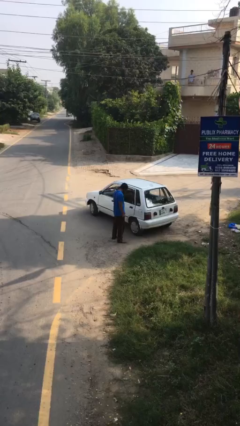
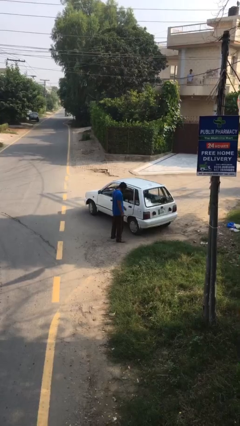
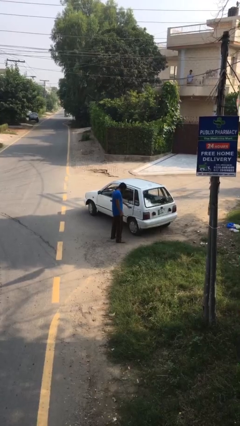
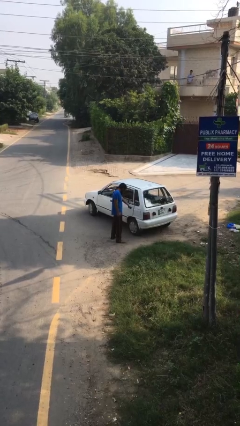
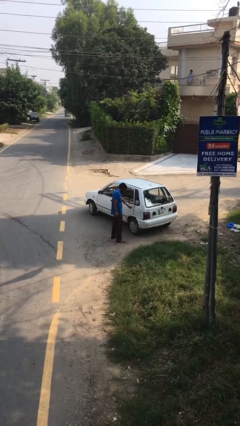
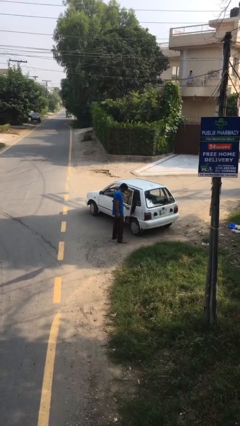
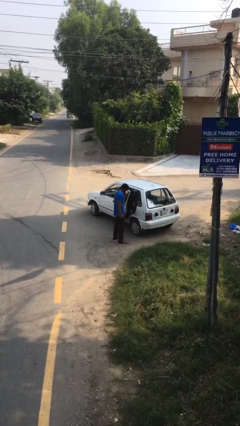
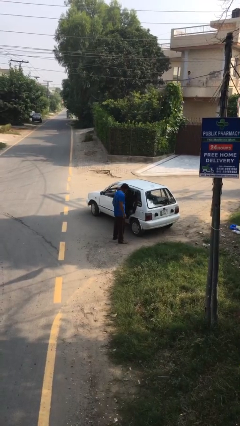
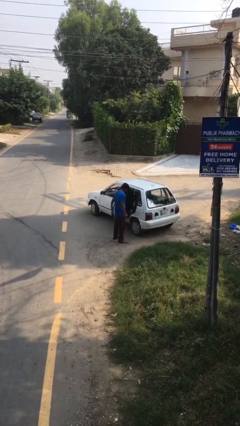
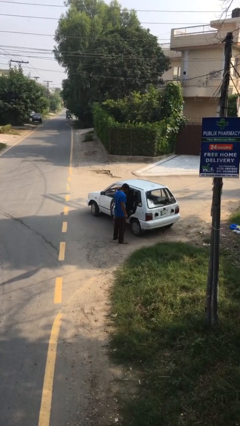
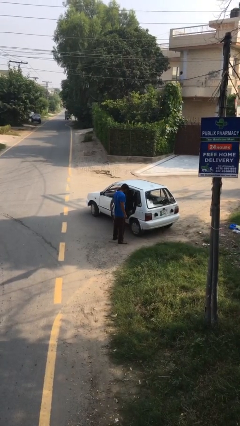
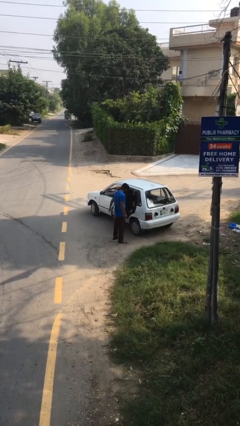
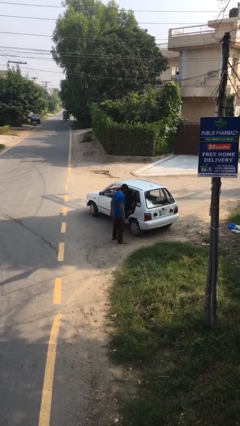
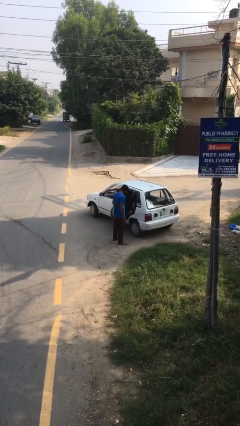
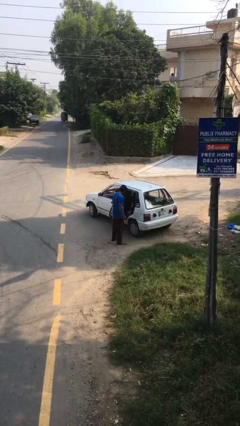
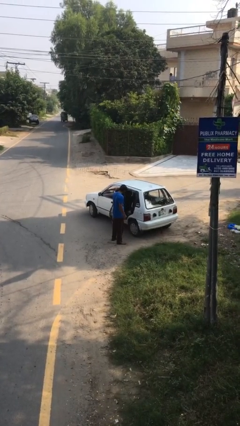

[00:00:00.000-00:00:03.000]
person opens car door

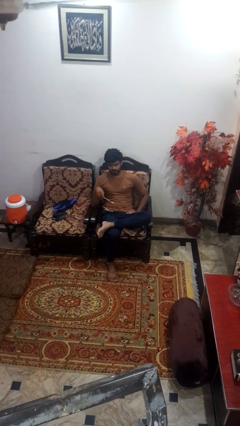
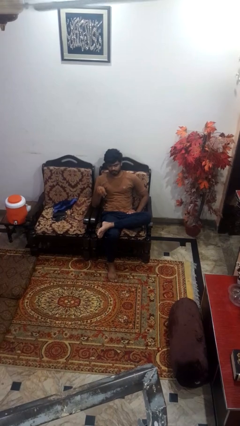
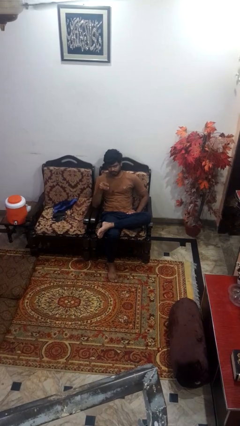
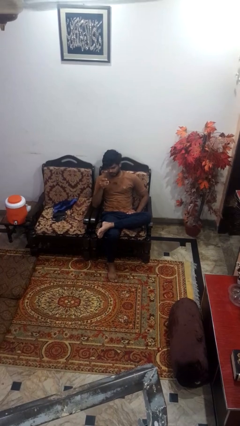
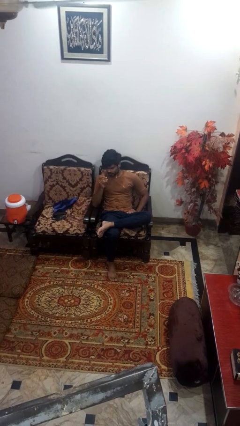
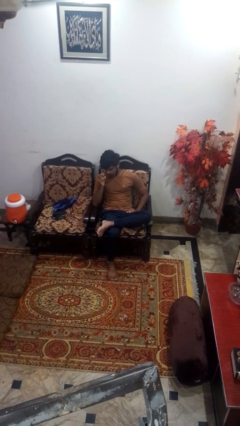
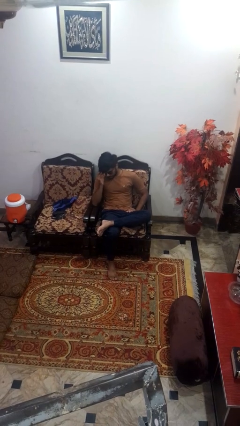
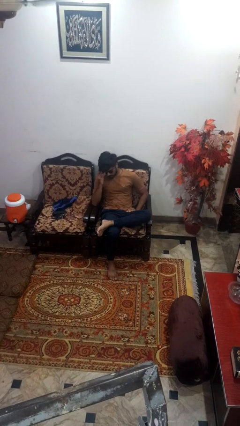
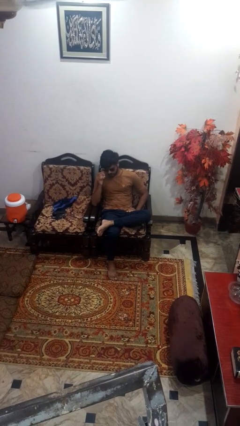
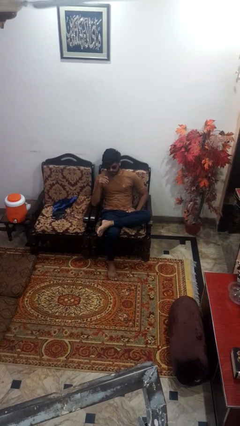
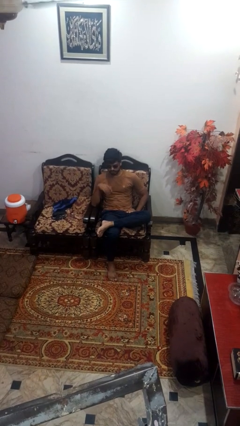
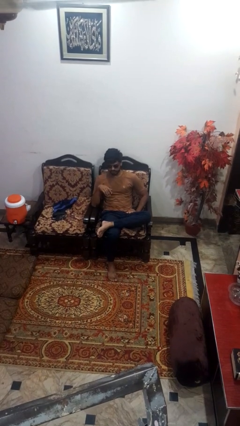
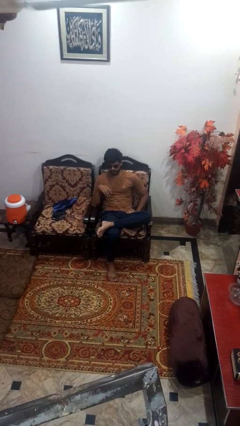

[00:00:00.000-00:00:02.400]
person puts on sunglasses

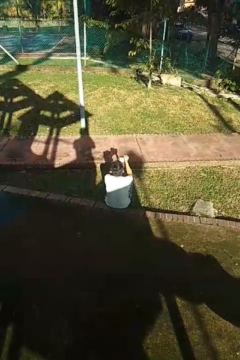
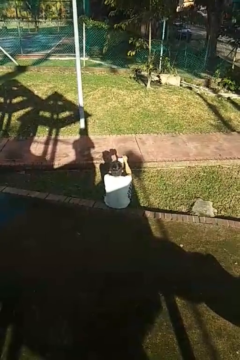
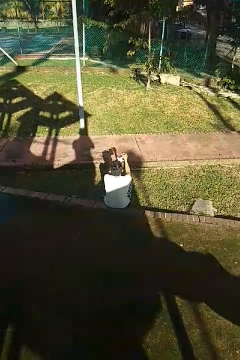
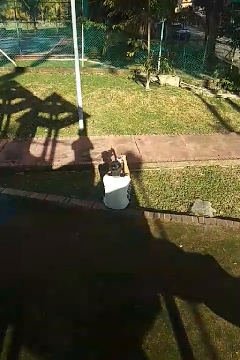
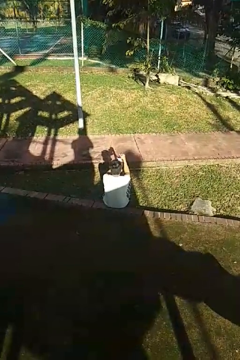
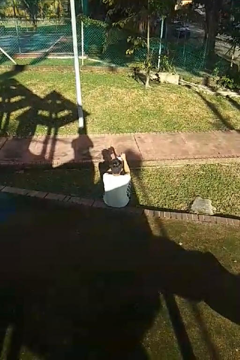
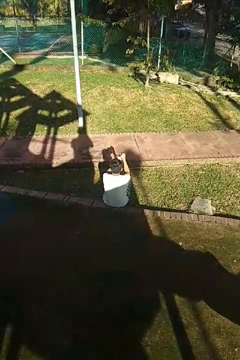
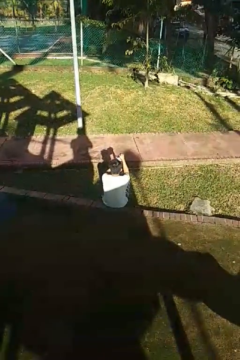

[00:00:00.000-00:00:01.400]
person stirs mug

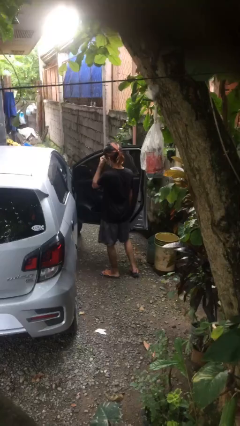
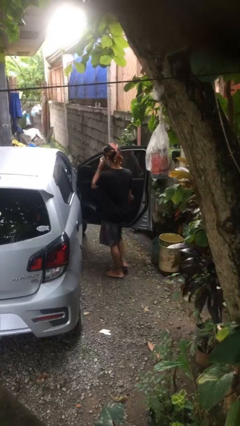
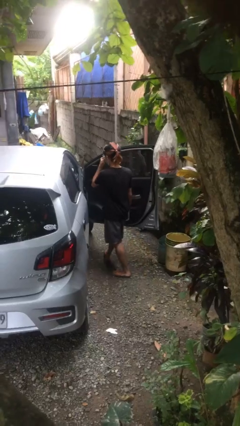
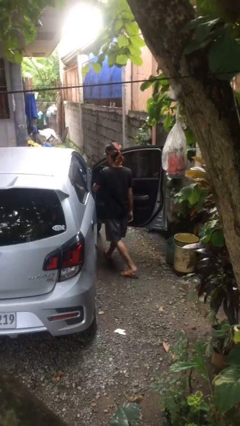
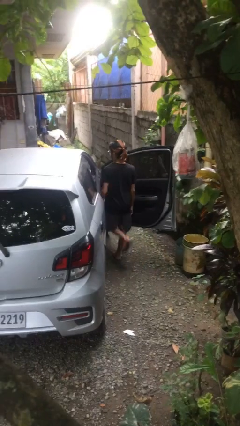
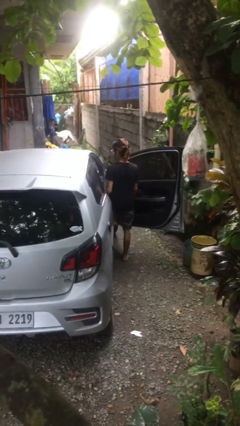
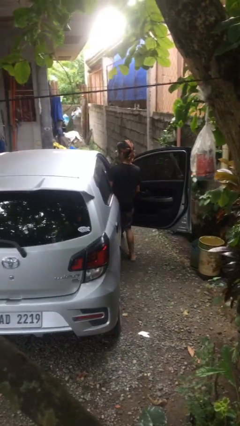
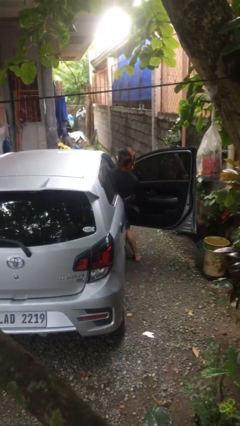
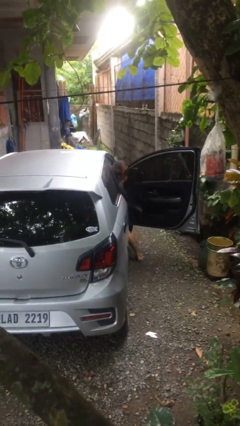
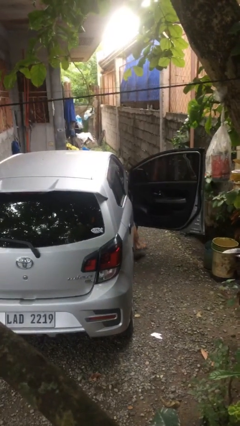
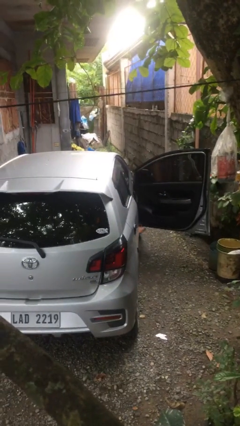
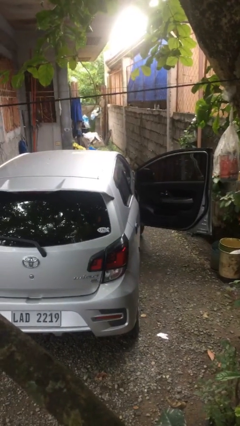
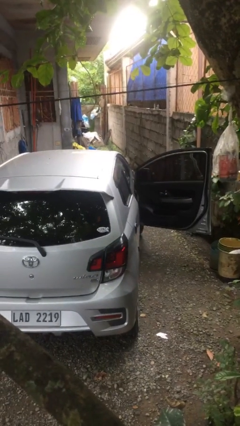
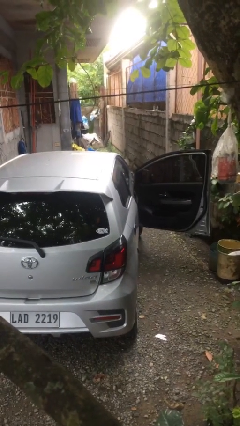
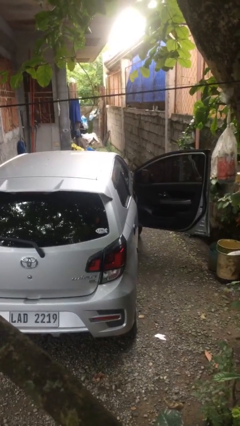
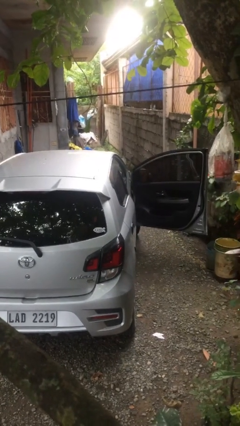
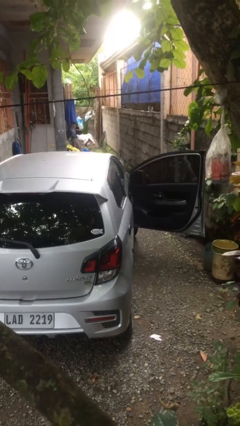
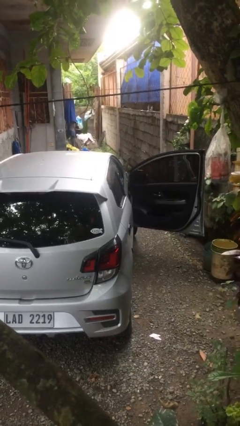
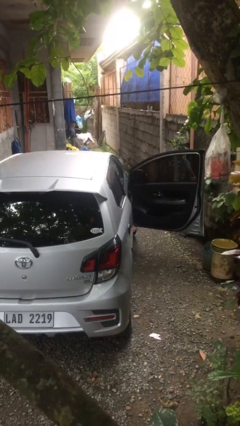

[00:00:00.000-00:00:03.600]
person enters car

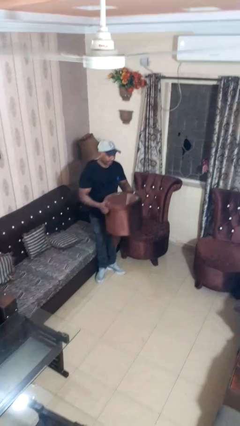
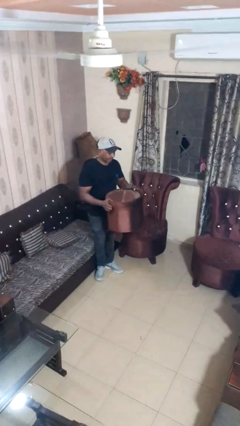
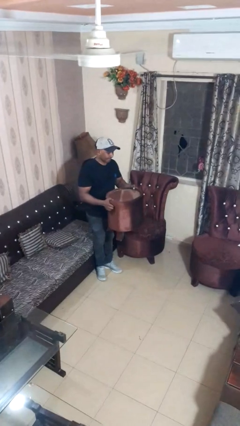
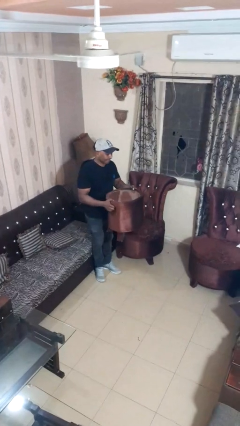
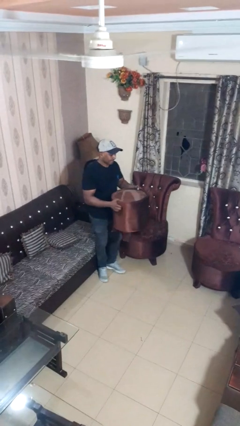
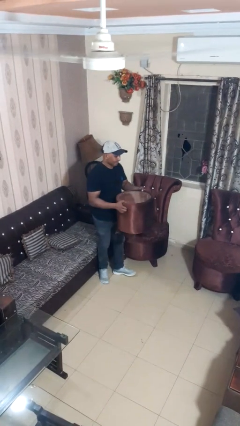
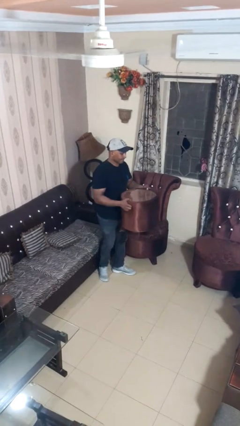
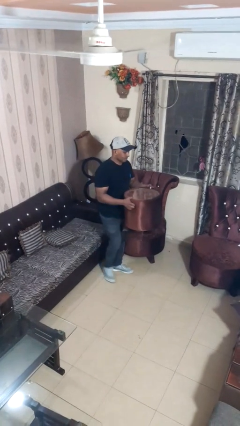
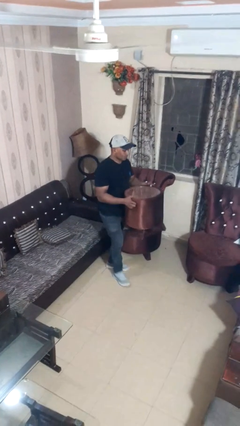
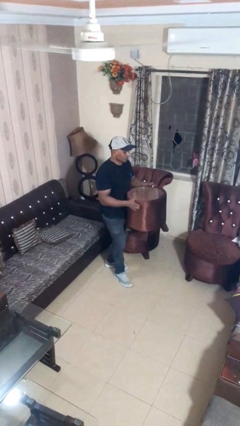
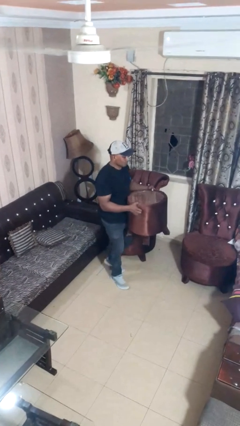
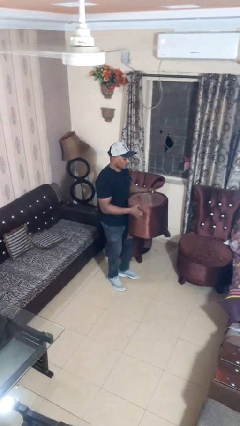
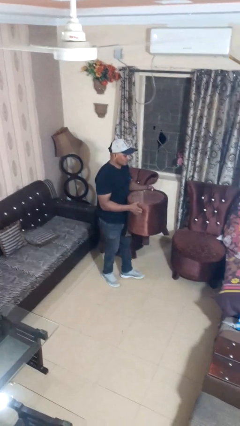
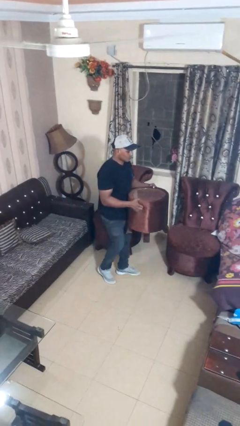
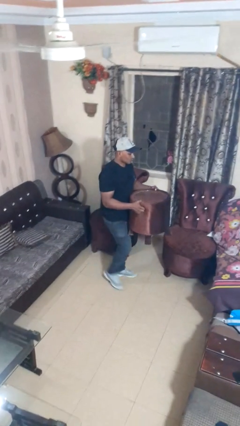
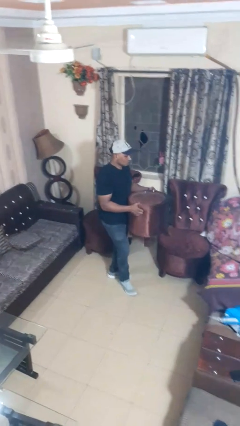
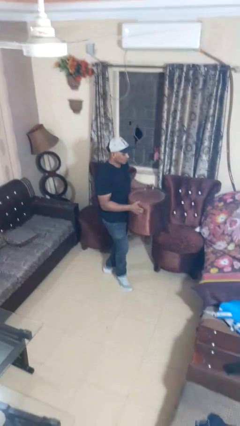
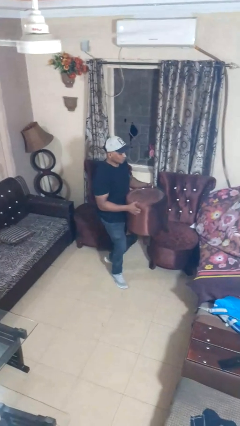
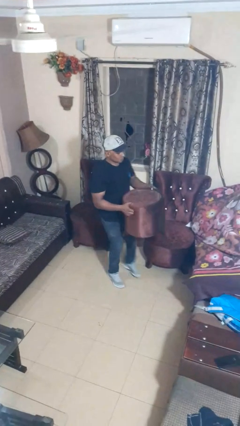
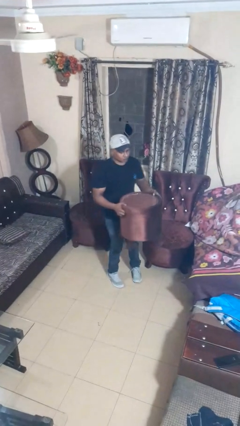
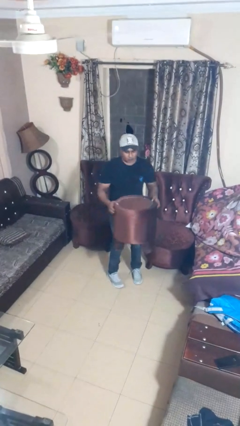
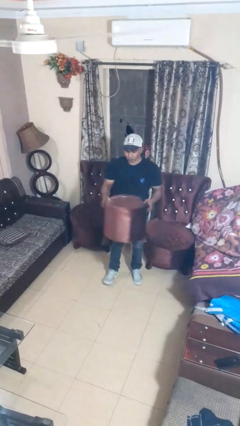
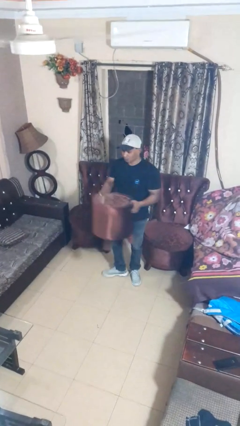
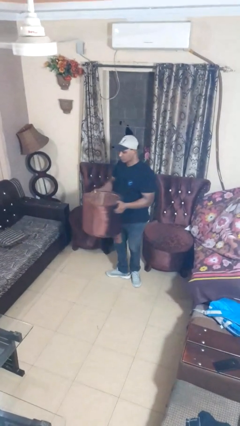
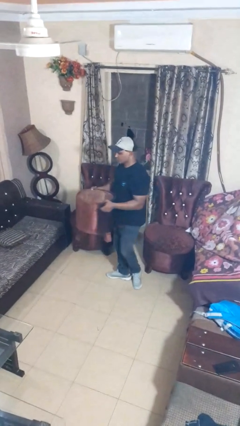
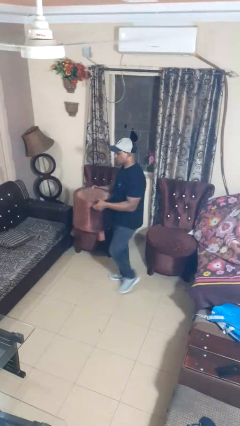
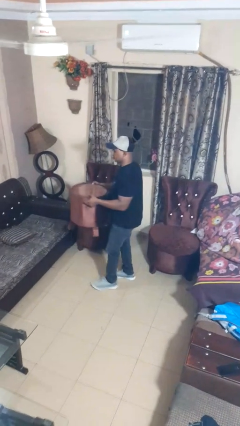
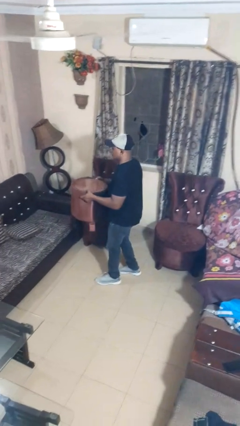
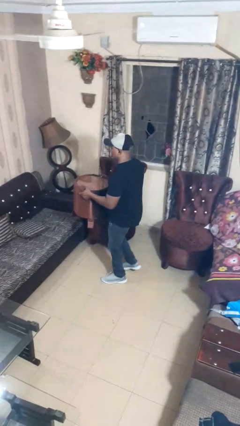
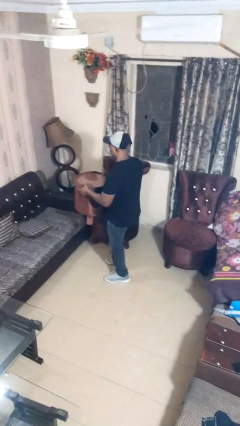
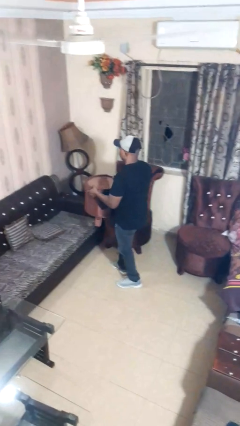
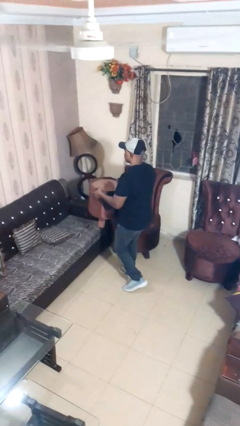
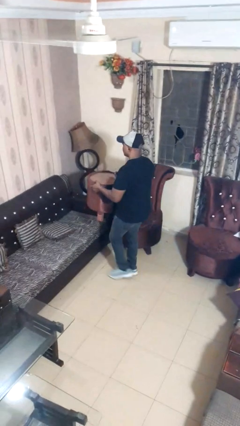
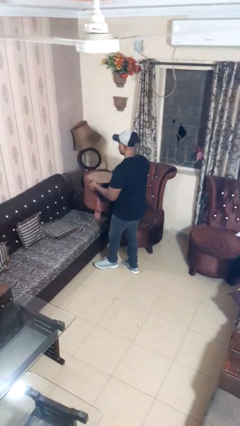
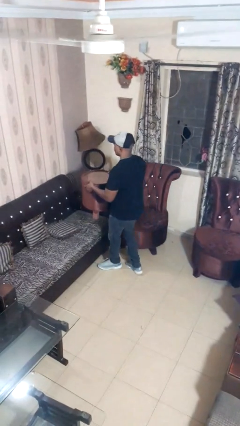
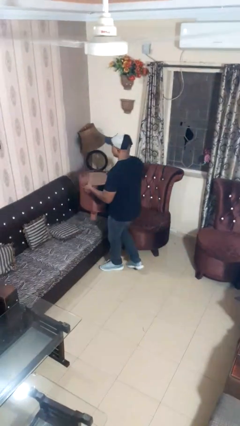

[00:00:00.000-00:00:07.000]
person carries furniture

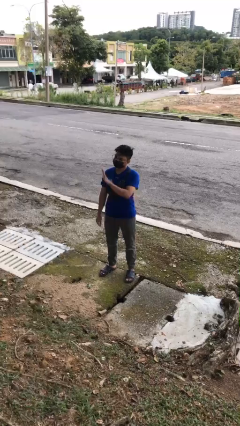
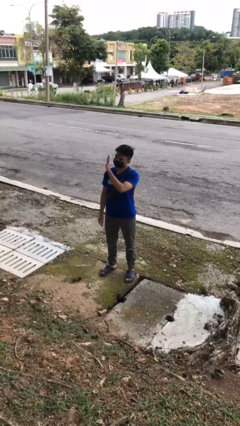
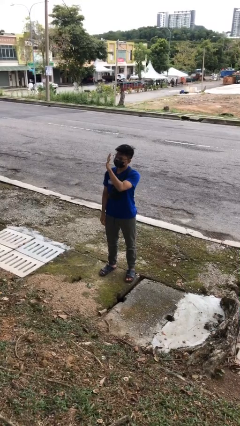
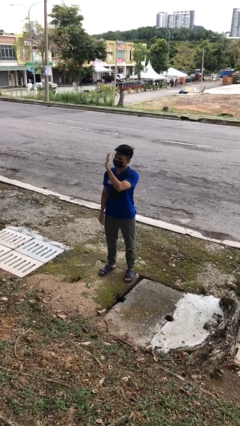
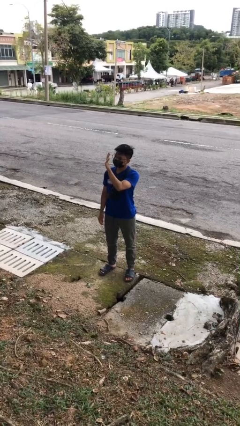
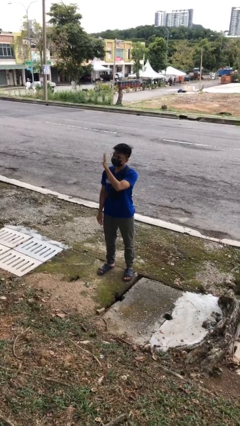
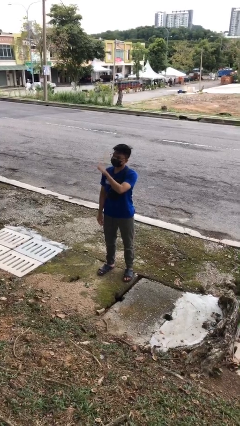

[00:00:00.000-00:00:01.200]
person gestures number five
